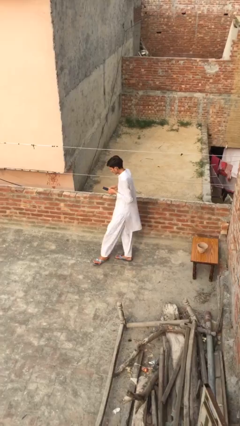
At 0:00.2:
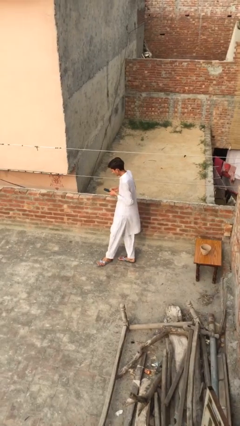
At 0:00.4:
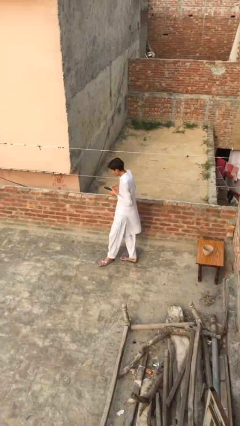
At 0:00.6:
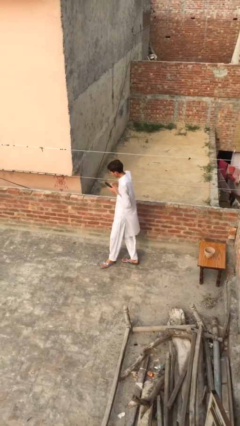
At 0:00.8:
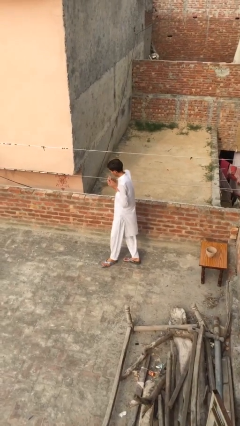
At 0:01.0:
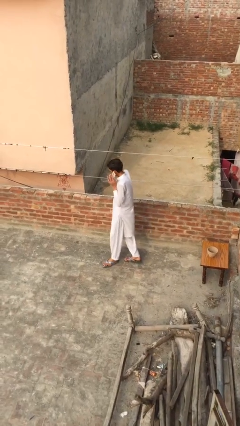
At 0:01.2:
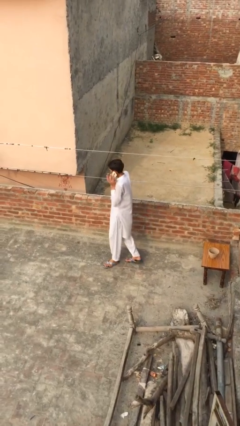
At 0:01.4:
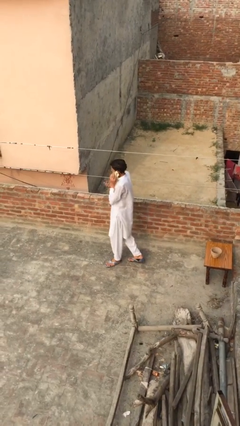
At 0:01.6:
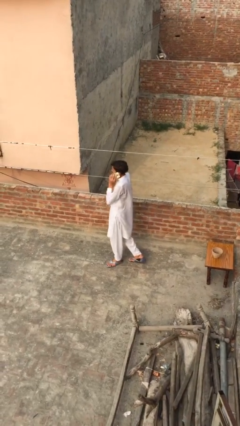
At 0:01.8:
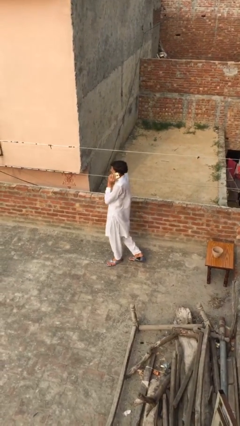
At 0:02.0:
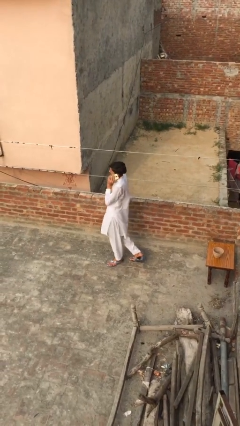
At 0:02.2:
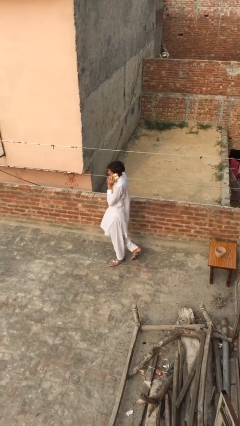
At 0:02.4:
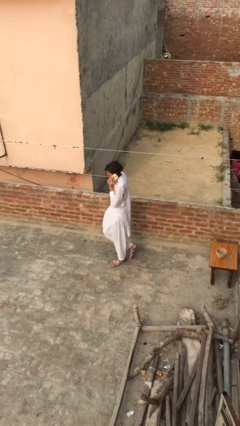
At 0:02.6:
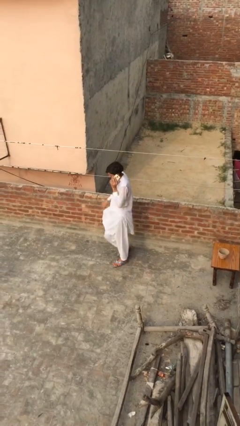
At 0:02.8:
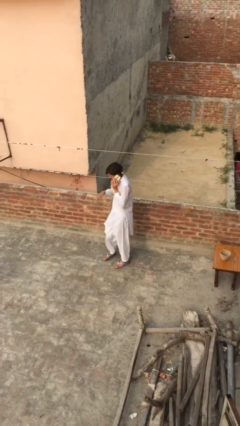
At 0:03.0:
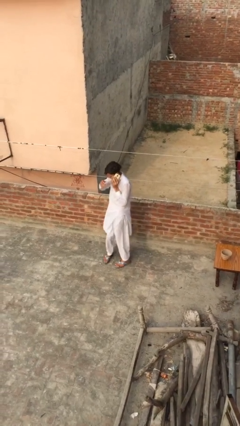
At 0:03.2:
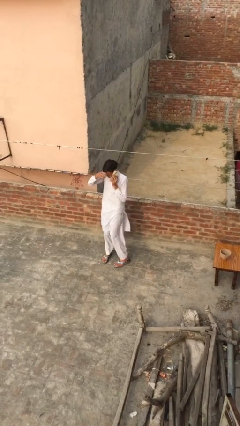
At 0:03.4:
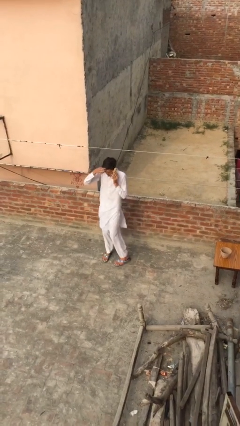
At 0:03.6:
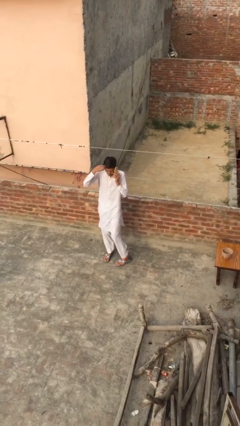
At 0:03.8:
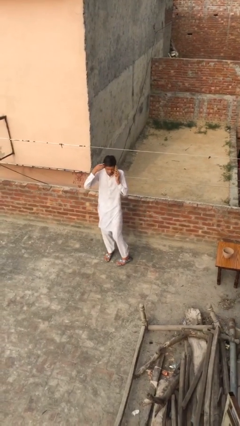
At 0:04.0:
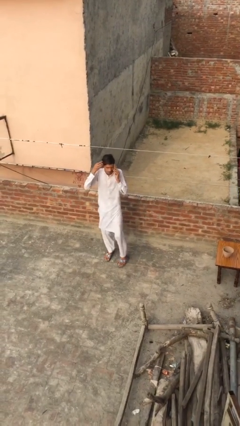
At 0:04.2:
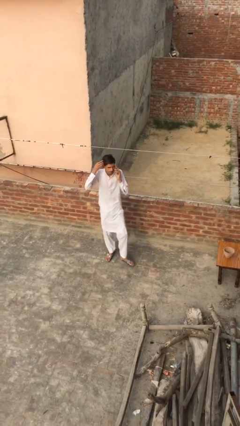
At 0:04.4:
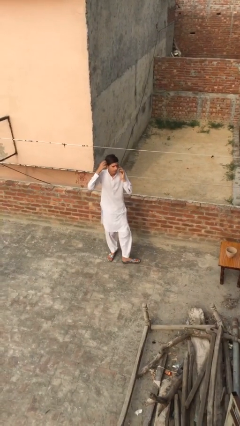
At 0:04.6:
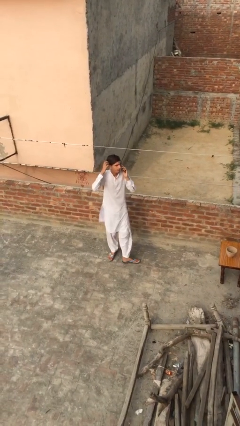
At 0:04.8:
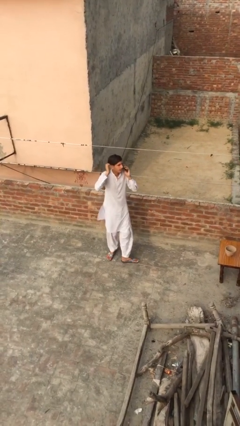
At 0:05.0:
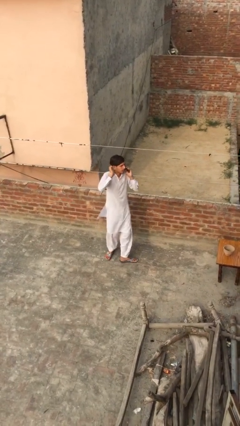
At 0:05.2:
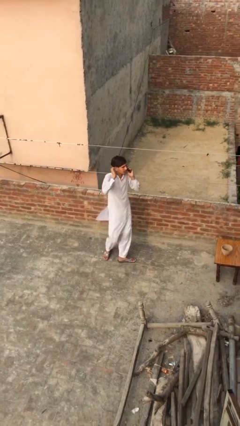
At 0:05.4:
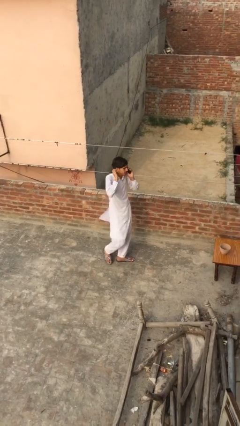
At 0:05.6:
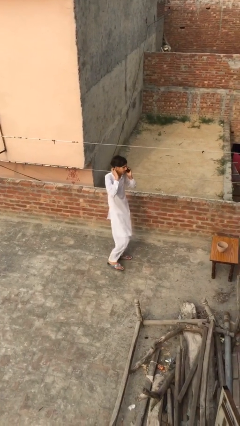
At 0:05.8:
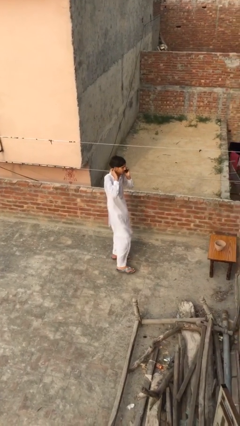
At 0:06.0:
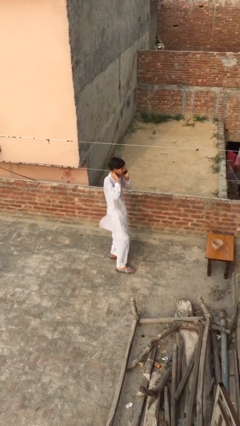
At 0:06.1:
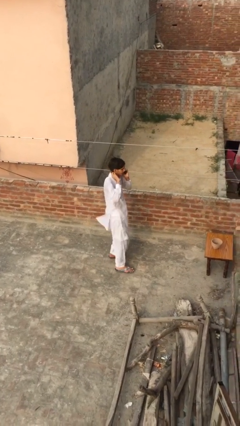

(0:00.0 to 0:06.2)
person talks on phone

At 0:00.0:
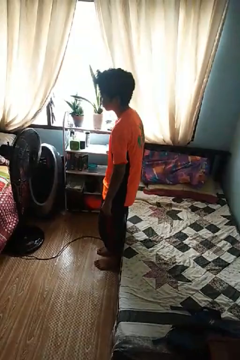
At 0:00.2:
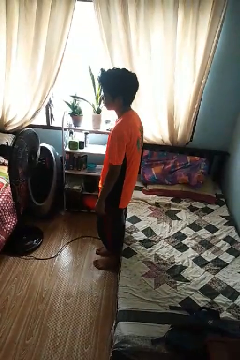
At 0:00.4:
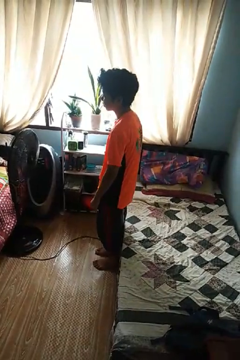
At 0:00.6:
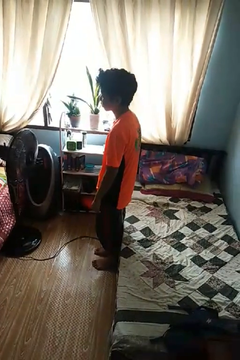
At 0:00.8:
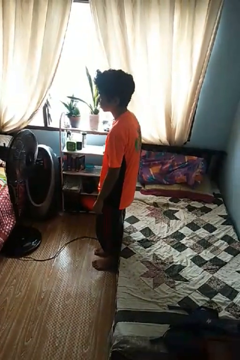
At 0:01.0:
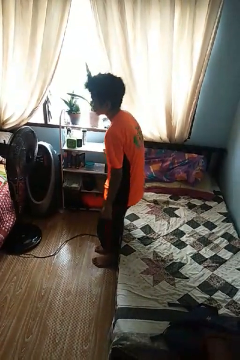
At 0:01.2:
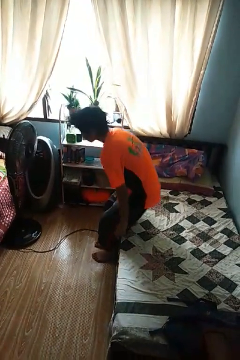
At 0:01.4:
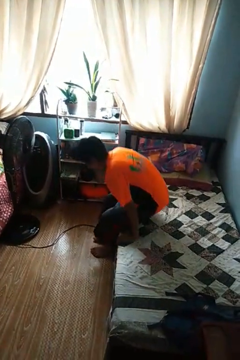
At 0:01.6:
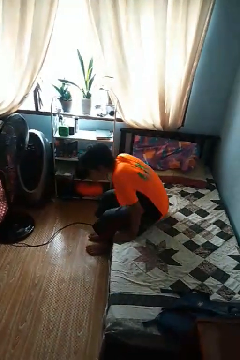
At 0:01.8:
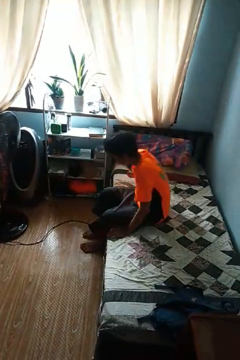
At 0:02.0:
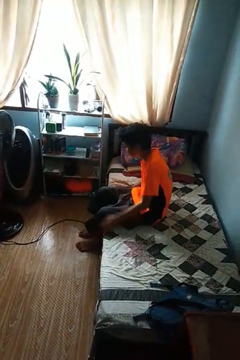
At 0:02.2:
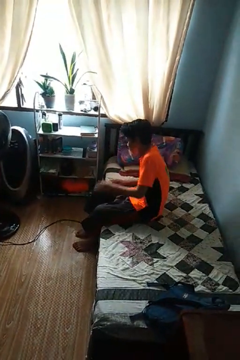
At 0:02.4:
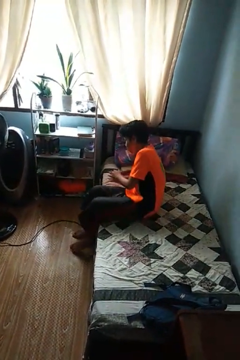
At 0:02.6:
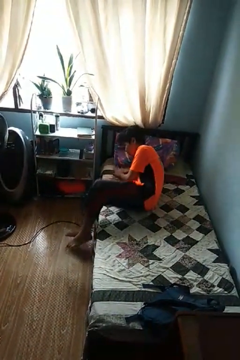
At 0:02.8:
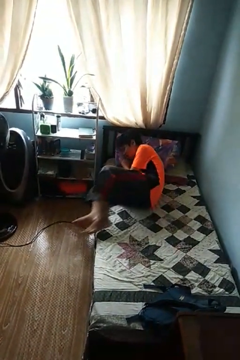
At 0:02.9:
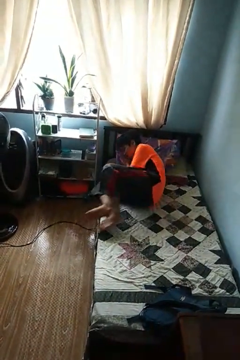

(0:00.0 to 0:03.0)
person lies down on bed

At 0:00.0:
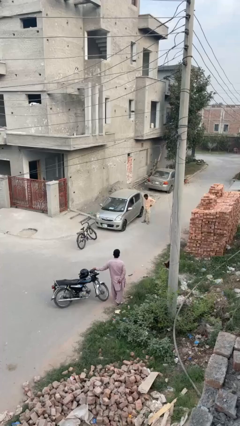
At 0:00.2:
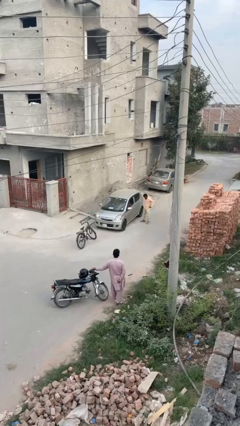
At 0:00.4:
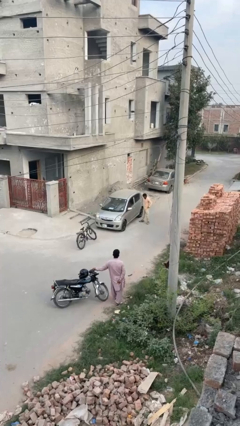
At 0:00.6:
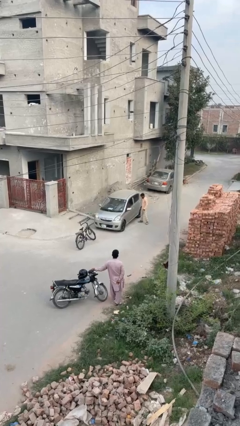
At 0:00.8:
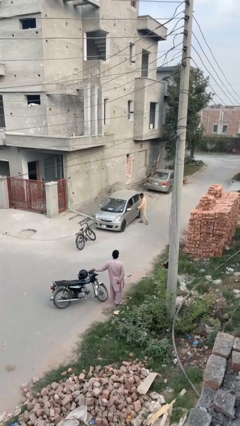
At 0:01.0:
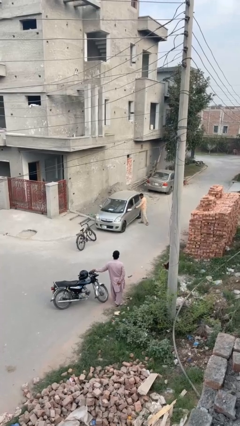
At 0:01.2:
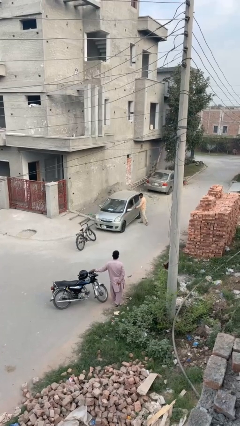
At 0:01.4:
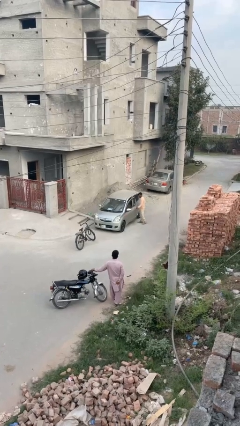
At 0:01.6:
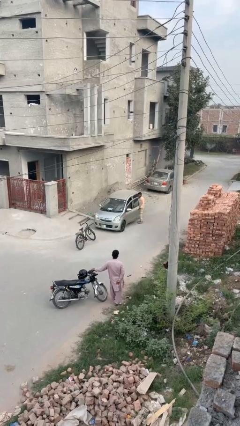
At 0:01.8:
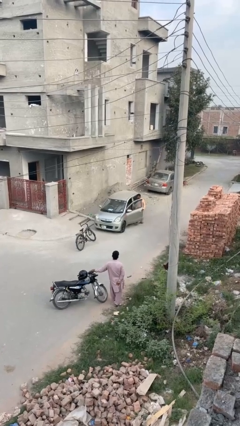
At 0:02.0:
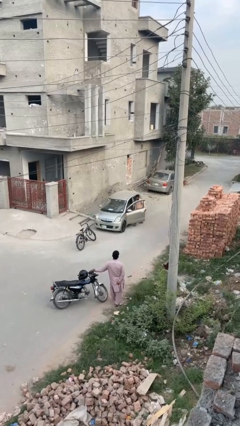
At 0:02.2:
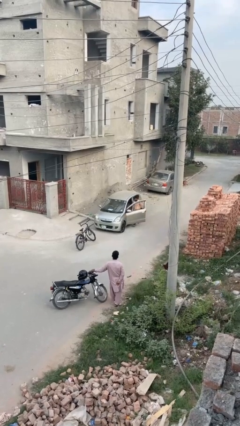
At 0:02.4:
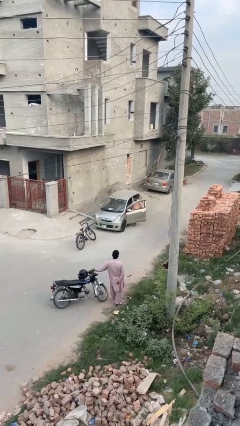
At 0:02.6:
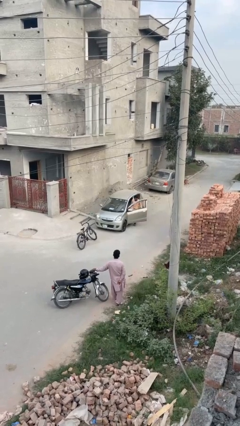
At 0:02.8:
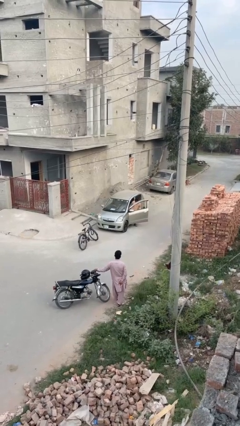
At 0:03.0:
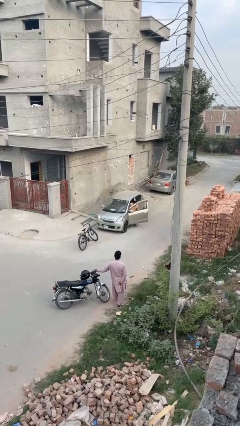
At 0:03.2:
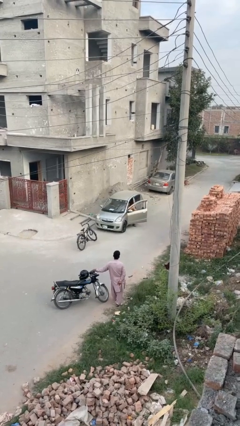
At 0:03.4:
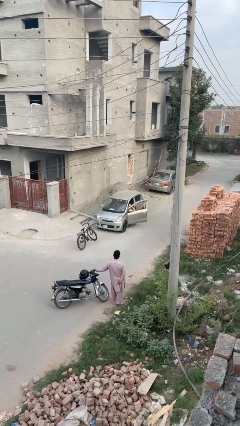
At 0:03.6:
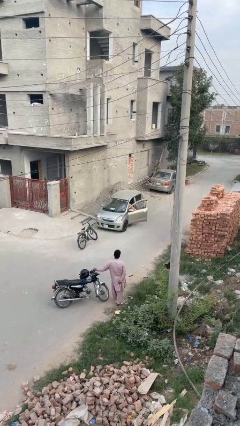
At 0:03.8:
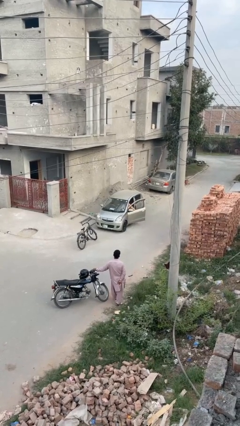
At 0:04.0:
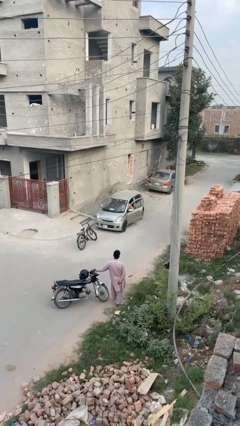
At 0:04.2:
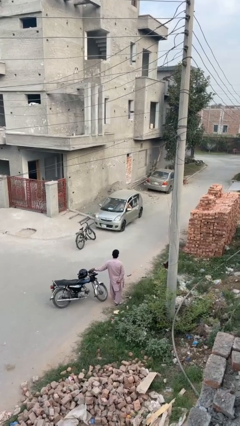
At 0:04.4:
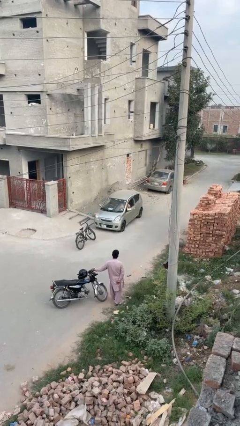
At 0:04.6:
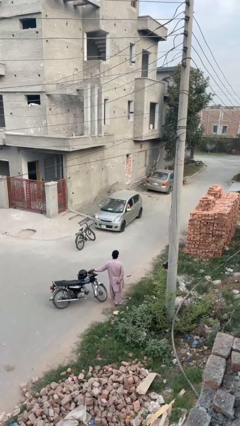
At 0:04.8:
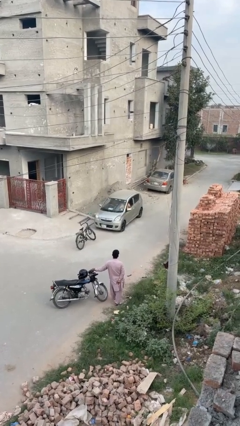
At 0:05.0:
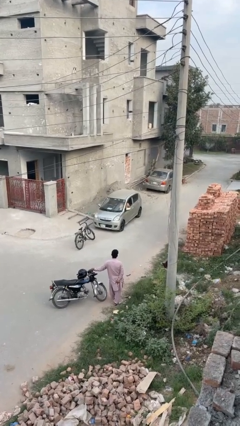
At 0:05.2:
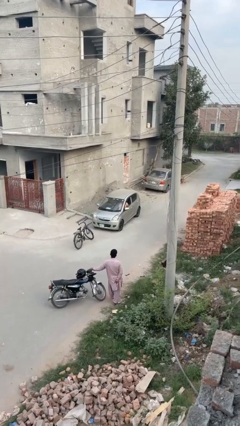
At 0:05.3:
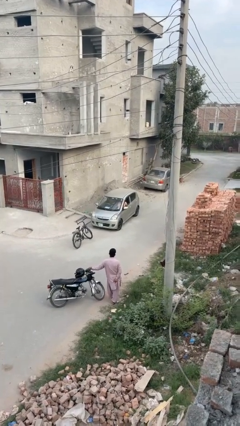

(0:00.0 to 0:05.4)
car picks up person

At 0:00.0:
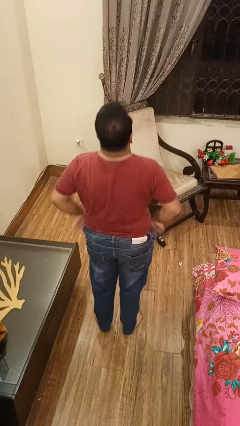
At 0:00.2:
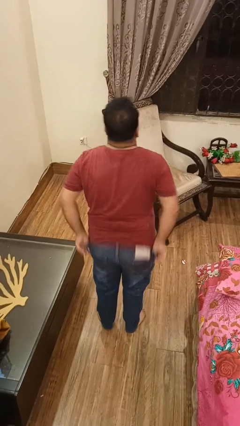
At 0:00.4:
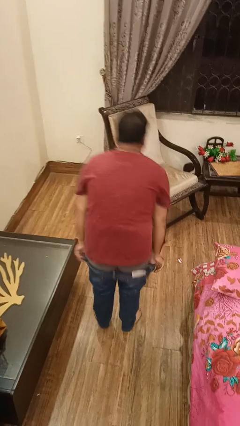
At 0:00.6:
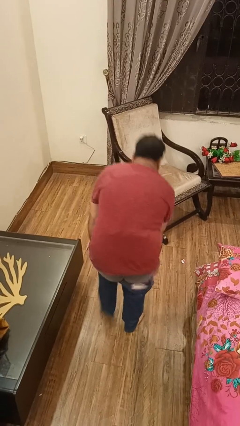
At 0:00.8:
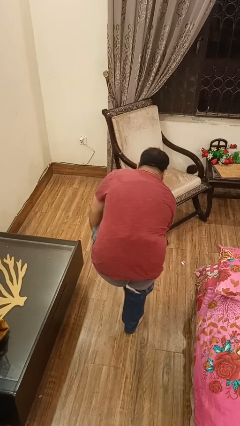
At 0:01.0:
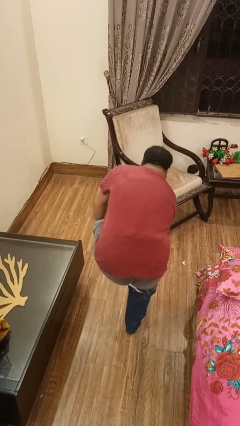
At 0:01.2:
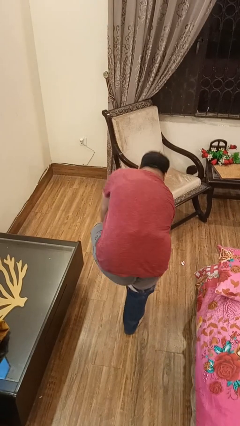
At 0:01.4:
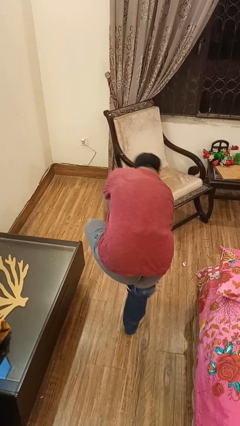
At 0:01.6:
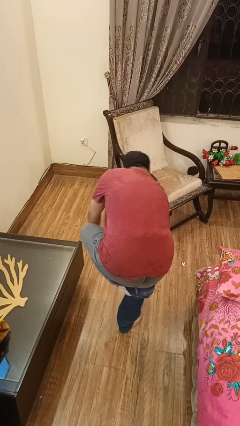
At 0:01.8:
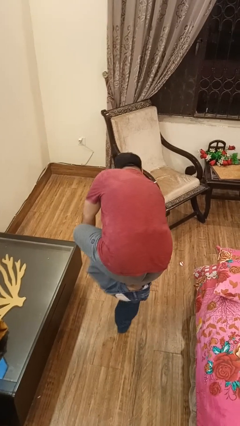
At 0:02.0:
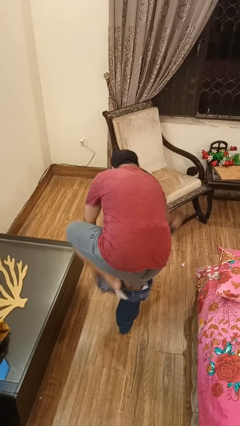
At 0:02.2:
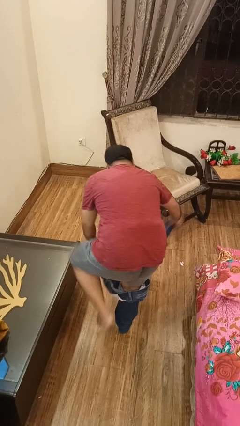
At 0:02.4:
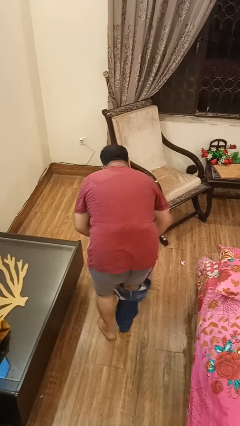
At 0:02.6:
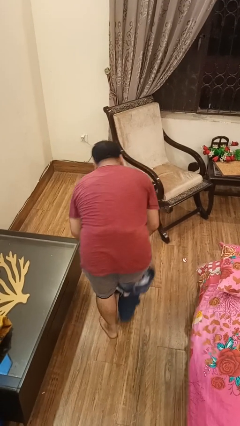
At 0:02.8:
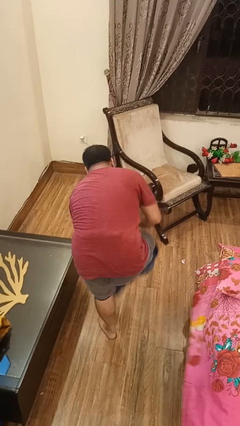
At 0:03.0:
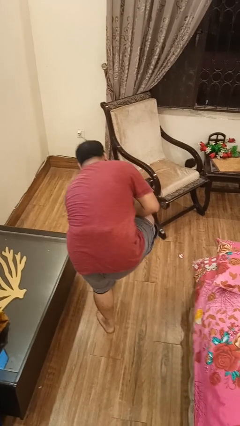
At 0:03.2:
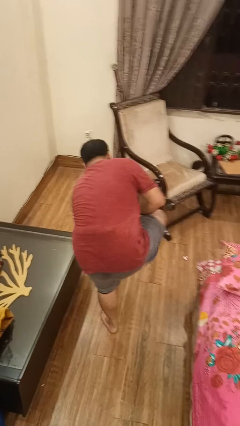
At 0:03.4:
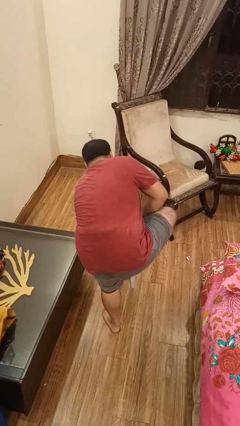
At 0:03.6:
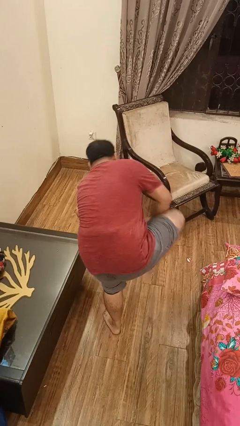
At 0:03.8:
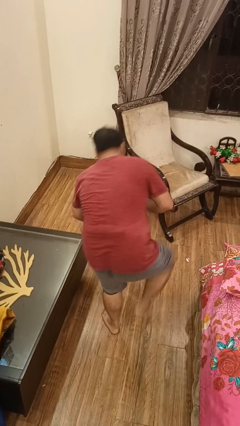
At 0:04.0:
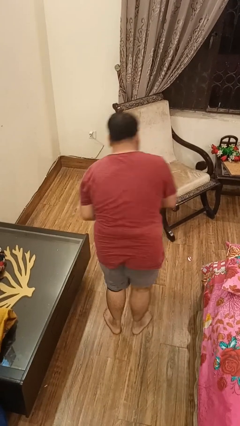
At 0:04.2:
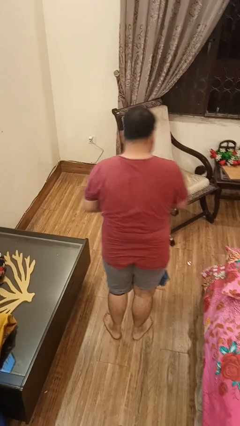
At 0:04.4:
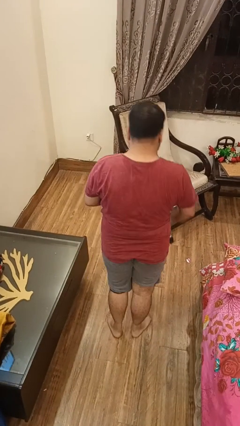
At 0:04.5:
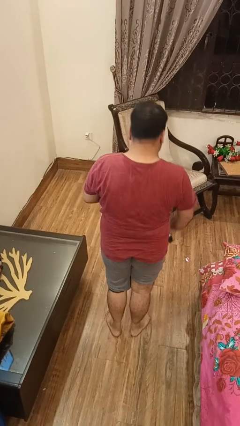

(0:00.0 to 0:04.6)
person takes off pants
